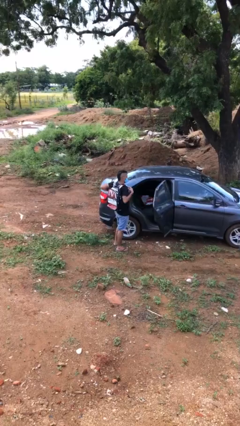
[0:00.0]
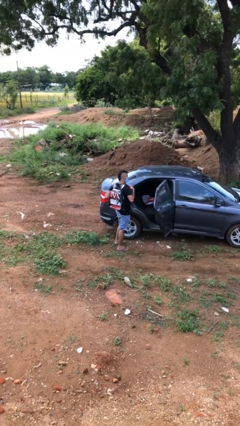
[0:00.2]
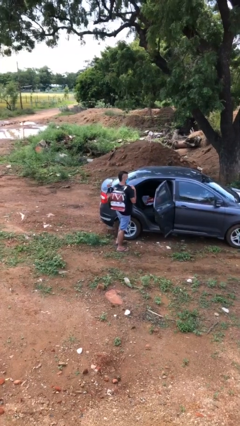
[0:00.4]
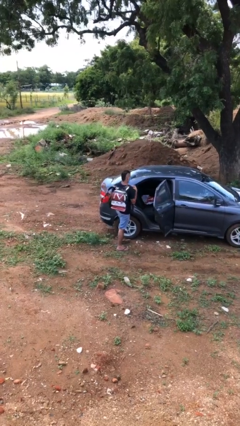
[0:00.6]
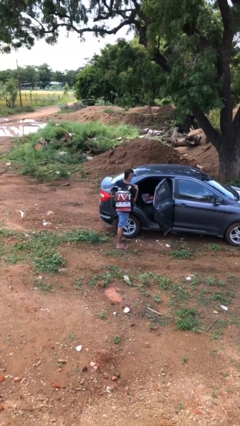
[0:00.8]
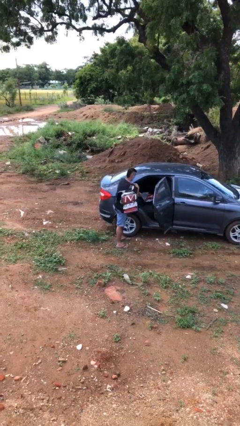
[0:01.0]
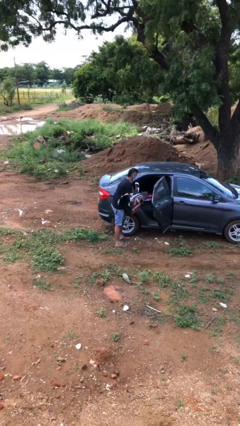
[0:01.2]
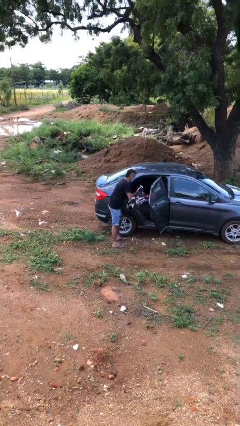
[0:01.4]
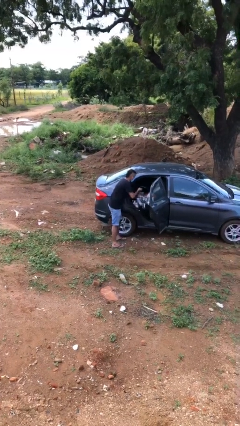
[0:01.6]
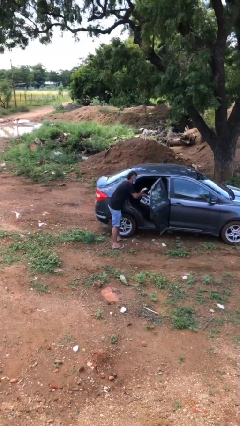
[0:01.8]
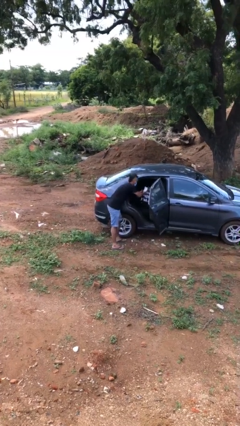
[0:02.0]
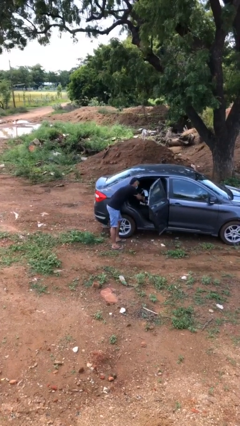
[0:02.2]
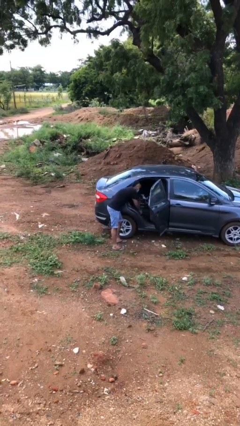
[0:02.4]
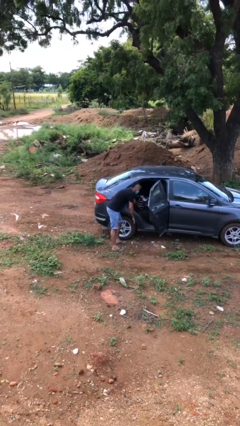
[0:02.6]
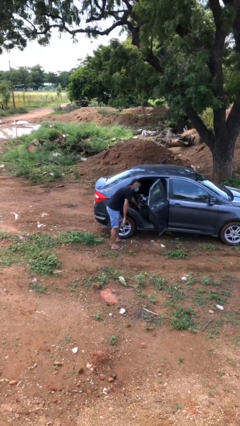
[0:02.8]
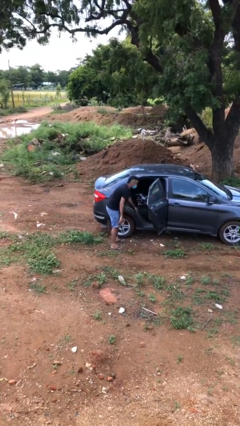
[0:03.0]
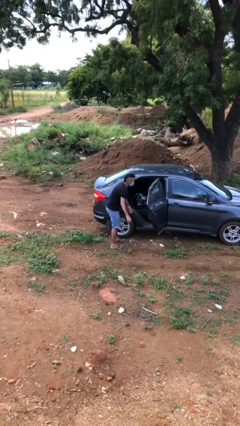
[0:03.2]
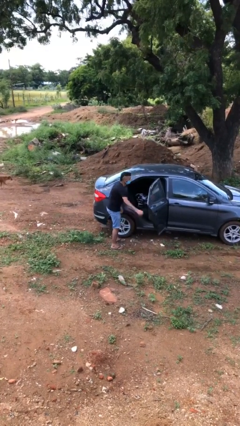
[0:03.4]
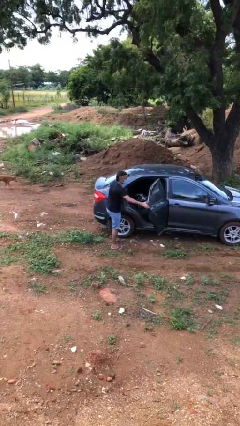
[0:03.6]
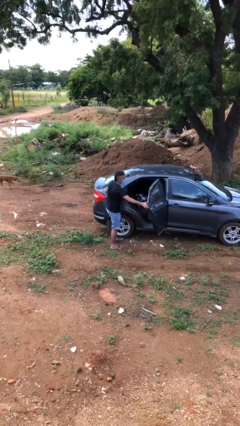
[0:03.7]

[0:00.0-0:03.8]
person loads car

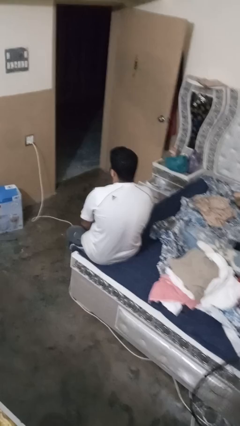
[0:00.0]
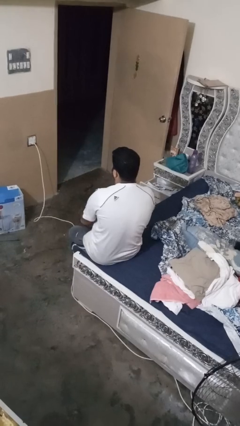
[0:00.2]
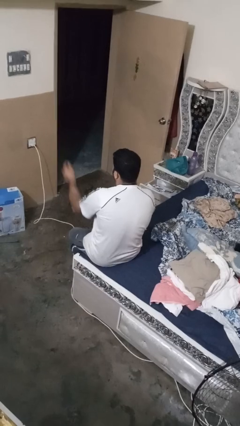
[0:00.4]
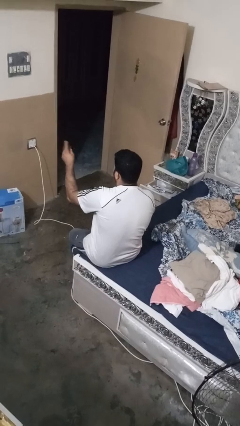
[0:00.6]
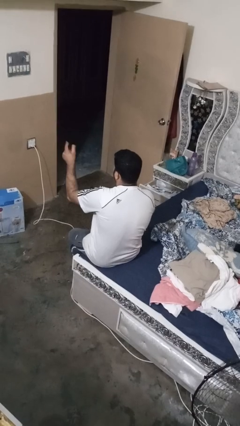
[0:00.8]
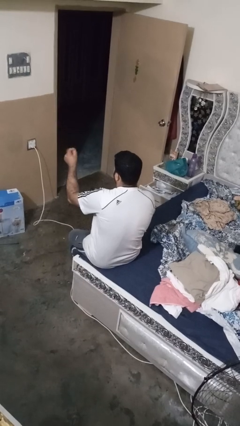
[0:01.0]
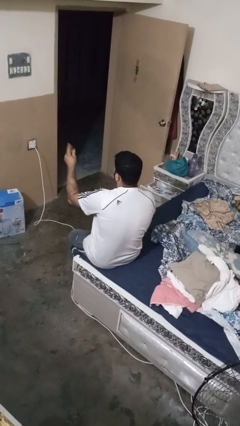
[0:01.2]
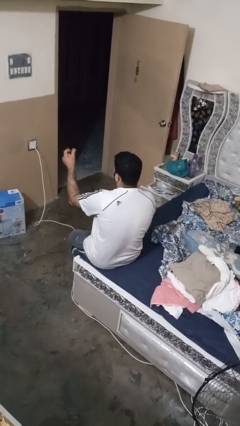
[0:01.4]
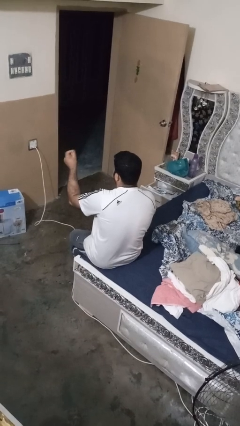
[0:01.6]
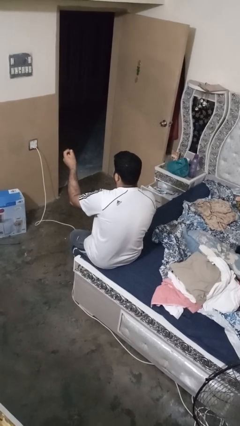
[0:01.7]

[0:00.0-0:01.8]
person snaps fingers

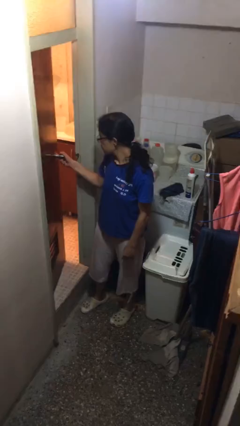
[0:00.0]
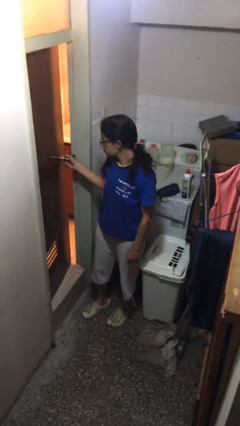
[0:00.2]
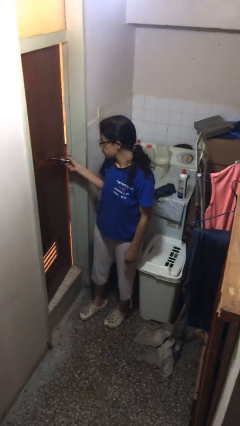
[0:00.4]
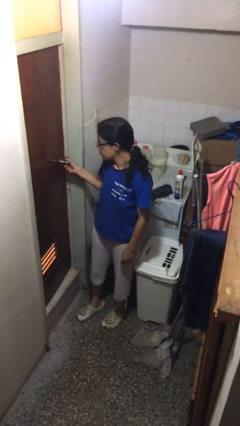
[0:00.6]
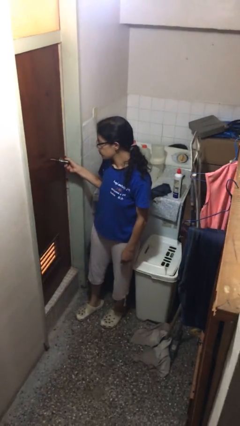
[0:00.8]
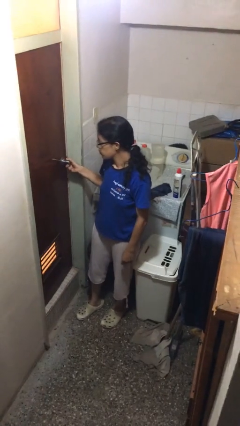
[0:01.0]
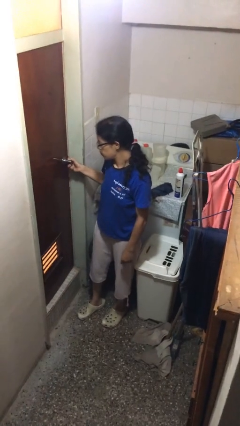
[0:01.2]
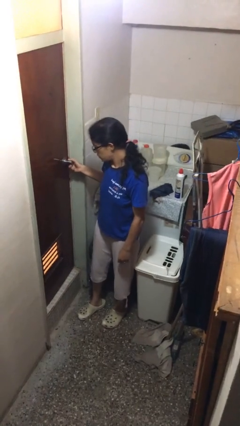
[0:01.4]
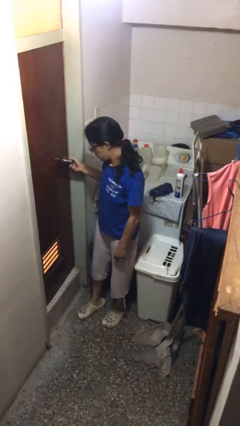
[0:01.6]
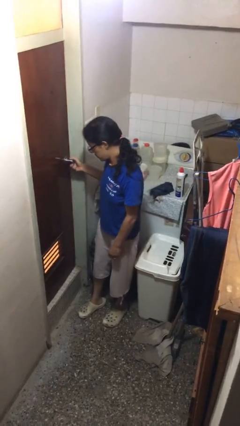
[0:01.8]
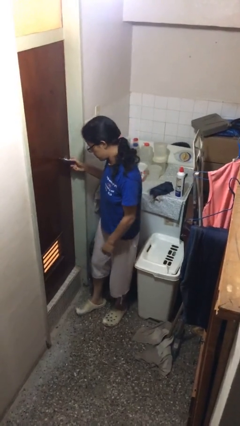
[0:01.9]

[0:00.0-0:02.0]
person closes facility door

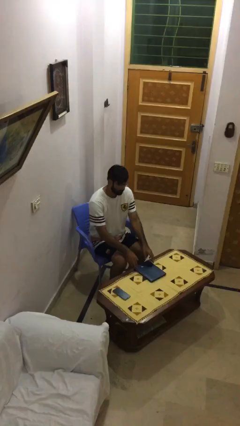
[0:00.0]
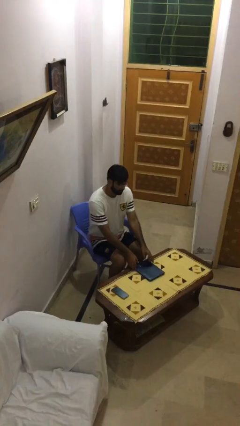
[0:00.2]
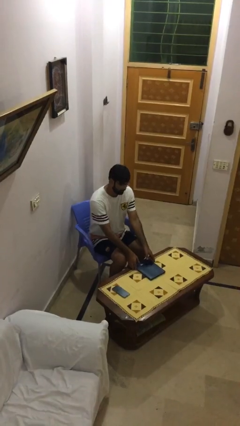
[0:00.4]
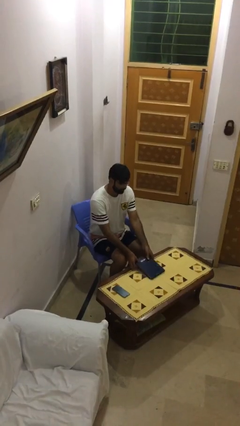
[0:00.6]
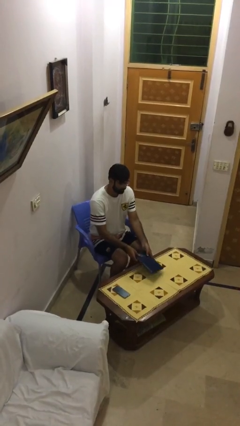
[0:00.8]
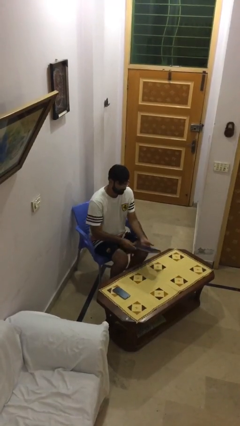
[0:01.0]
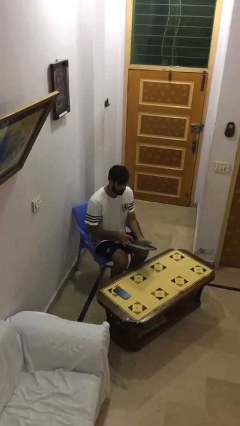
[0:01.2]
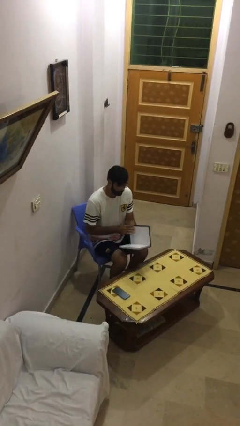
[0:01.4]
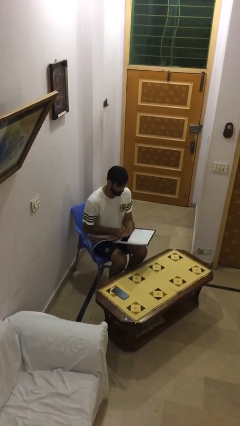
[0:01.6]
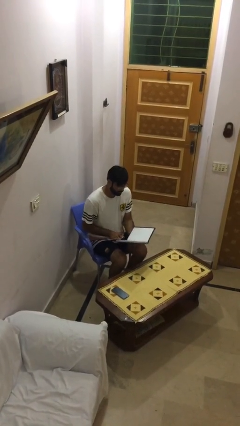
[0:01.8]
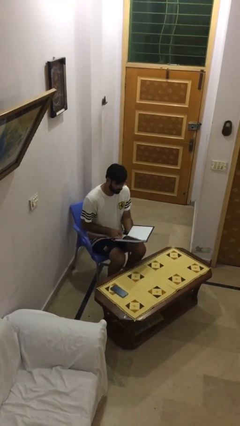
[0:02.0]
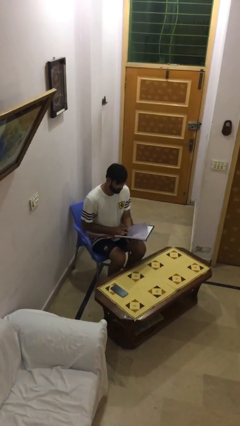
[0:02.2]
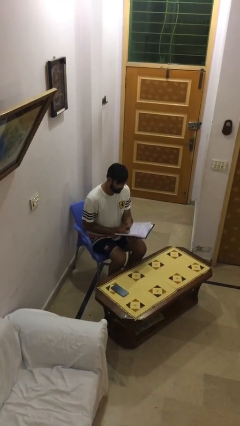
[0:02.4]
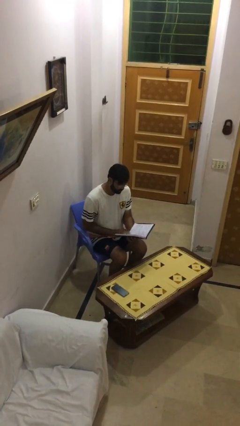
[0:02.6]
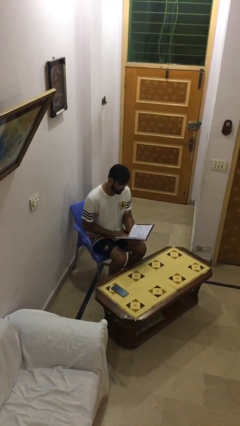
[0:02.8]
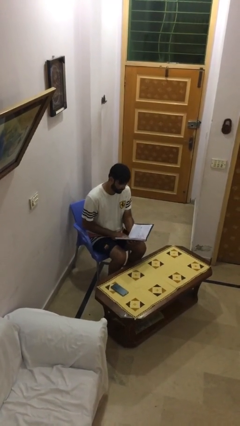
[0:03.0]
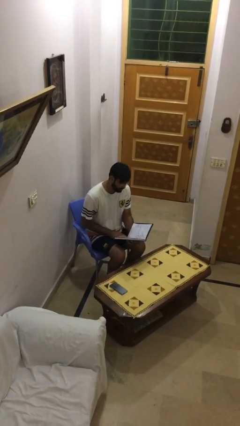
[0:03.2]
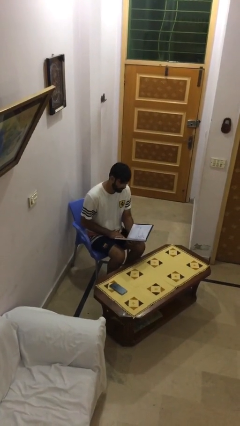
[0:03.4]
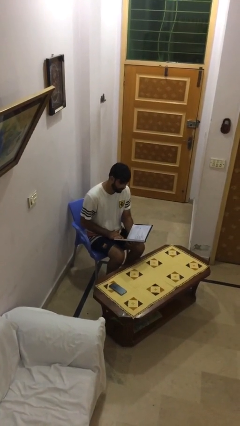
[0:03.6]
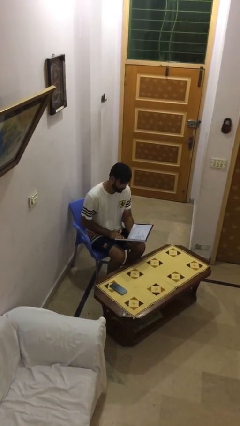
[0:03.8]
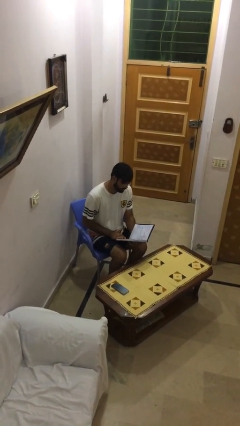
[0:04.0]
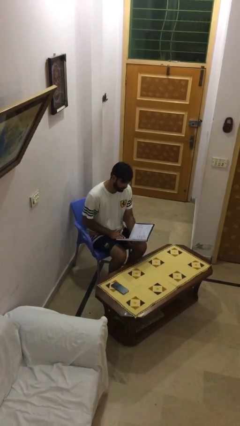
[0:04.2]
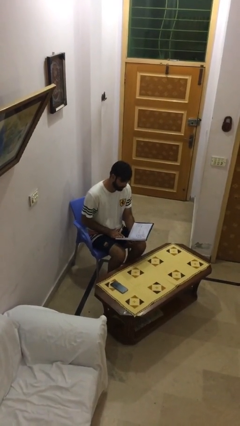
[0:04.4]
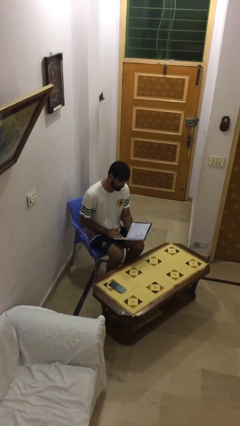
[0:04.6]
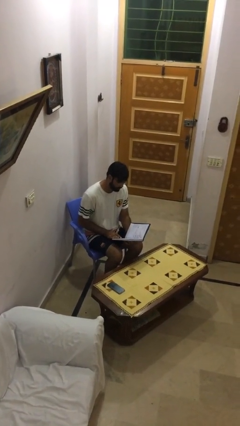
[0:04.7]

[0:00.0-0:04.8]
person reads document

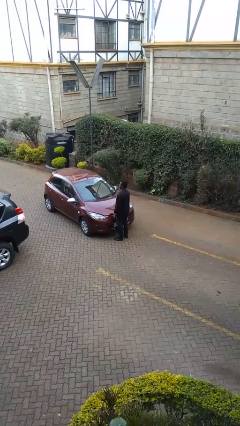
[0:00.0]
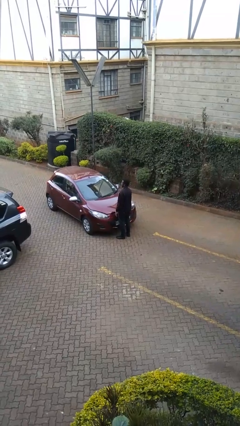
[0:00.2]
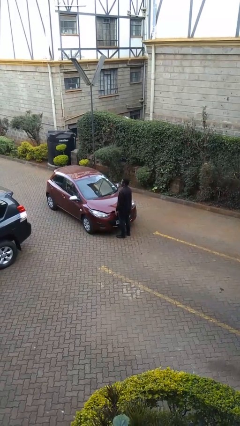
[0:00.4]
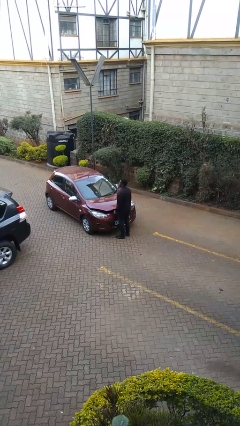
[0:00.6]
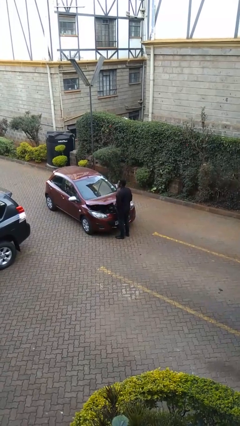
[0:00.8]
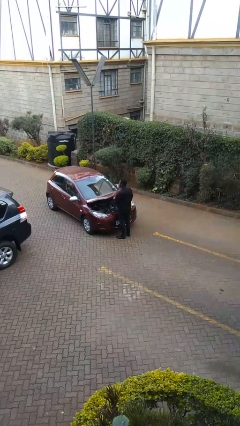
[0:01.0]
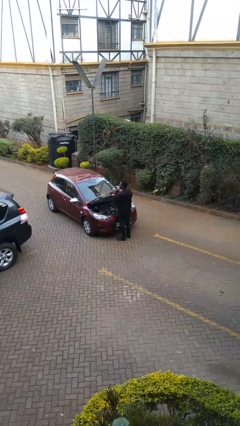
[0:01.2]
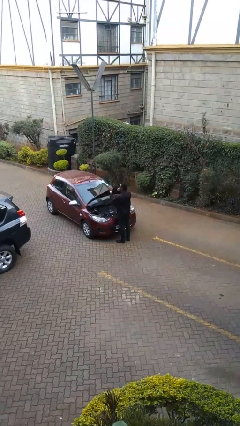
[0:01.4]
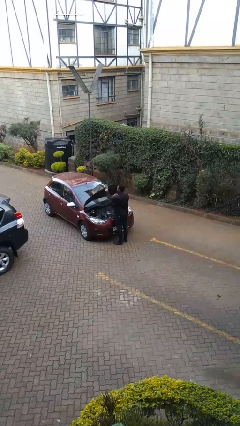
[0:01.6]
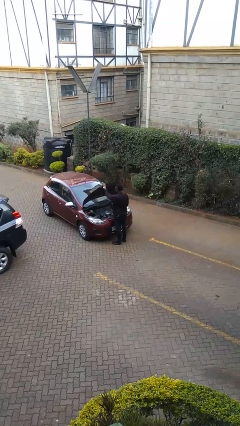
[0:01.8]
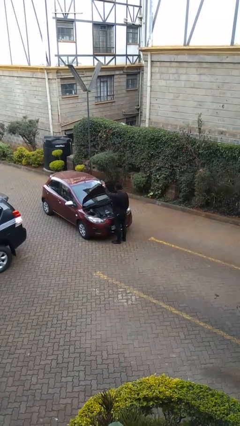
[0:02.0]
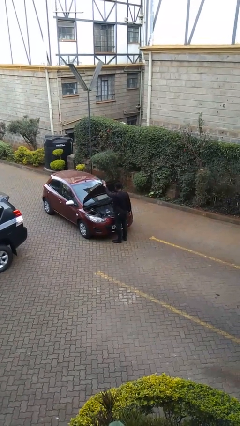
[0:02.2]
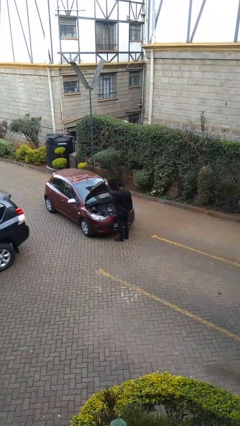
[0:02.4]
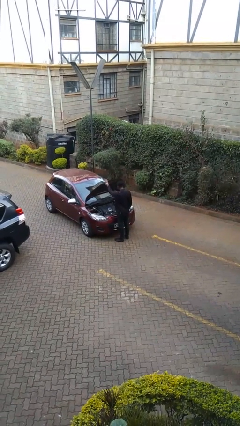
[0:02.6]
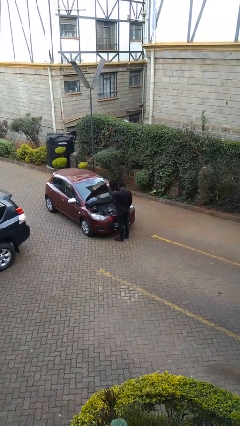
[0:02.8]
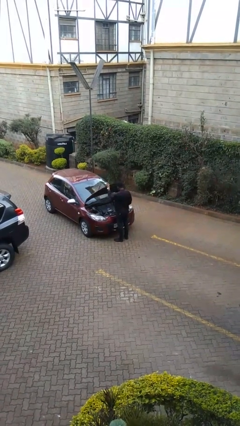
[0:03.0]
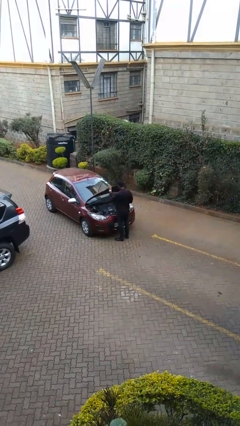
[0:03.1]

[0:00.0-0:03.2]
person opens car hood

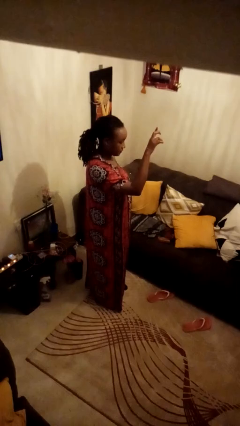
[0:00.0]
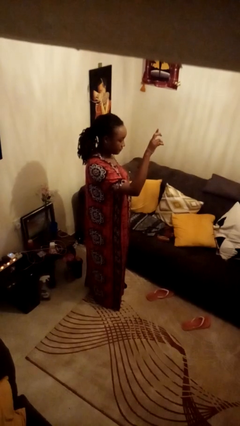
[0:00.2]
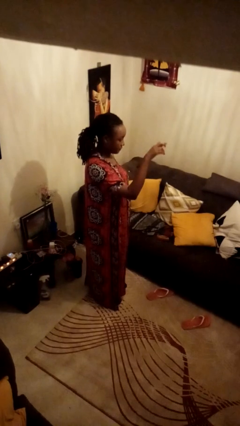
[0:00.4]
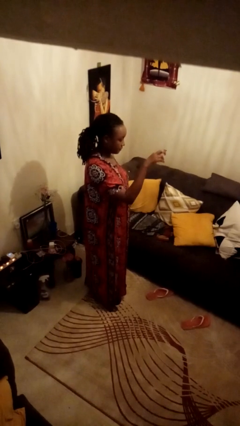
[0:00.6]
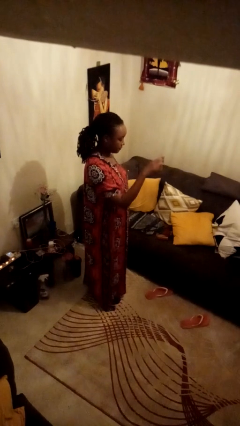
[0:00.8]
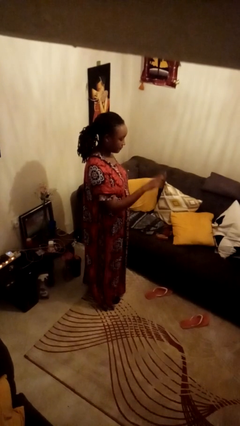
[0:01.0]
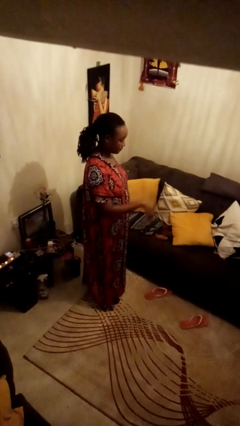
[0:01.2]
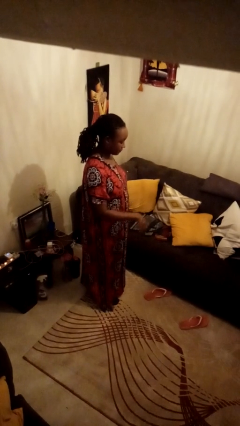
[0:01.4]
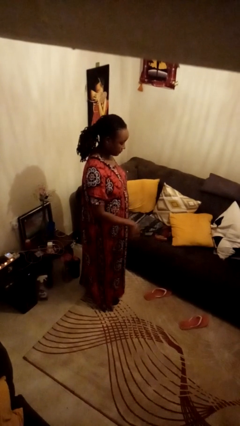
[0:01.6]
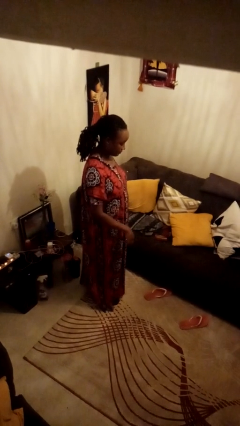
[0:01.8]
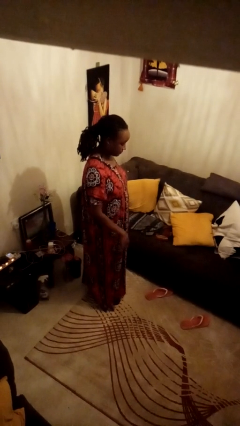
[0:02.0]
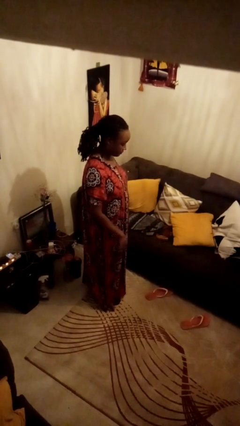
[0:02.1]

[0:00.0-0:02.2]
person gestures swipe down
